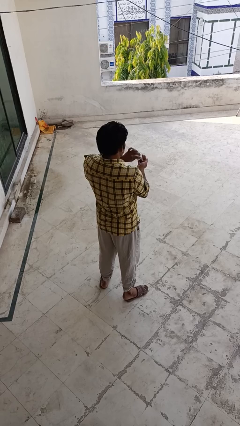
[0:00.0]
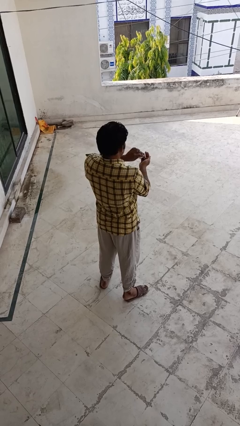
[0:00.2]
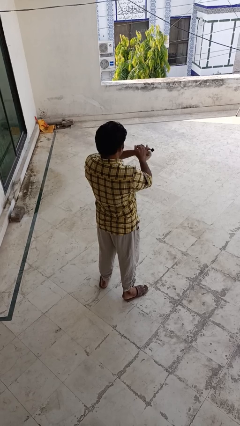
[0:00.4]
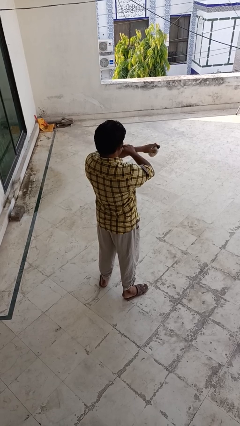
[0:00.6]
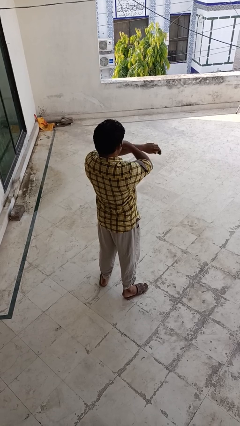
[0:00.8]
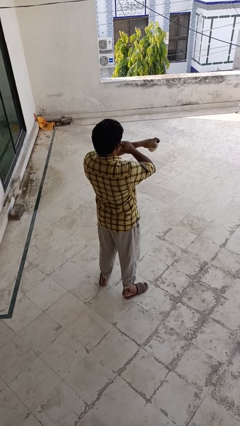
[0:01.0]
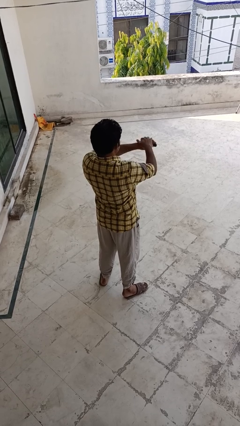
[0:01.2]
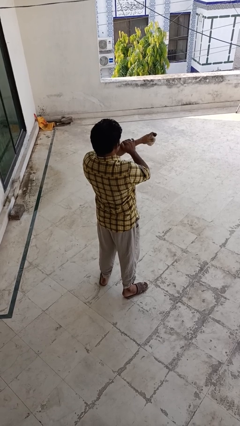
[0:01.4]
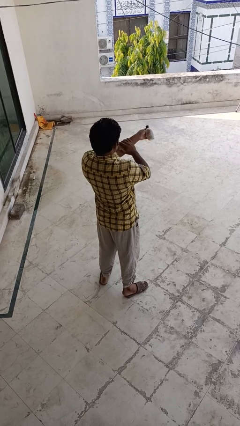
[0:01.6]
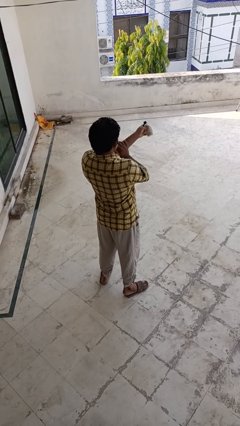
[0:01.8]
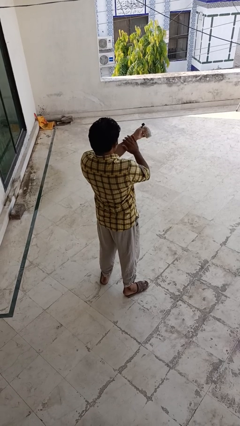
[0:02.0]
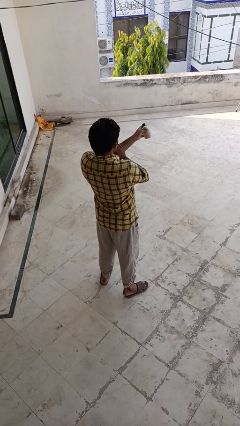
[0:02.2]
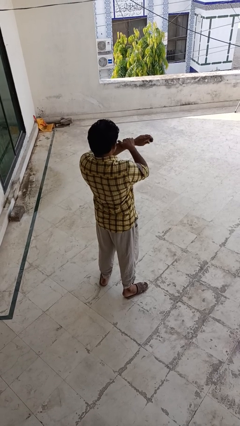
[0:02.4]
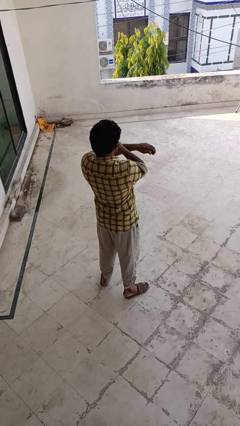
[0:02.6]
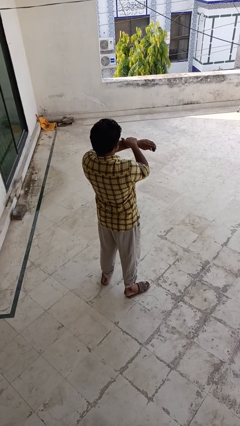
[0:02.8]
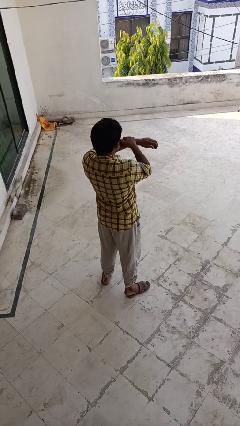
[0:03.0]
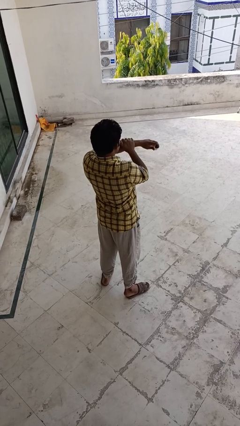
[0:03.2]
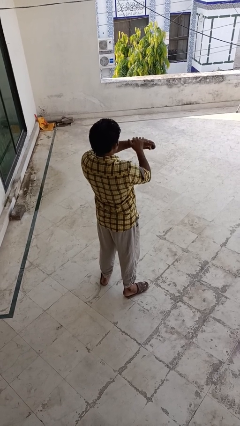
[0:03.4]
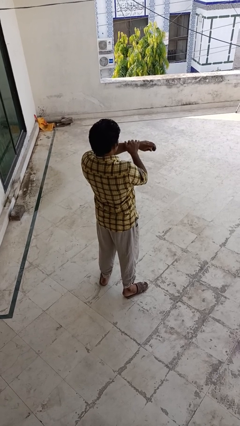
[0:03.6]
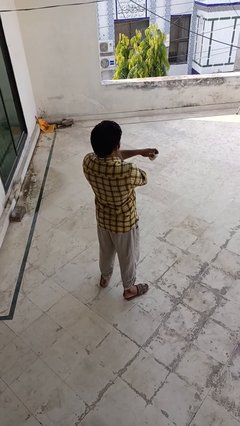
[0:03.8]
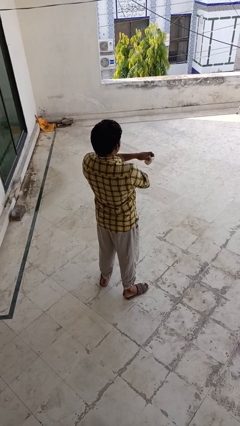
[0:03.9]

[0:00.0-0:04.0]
person applies sunscreen

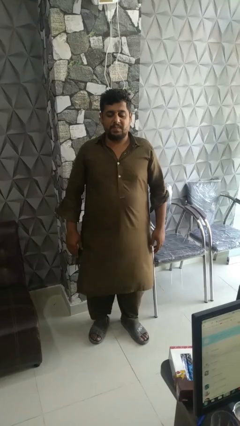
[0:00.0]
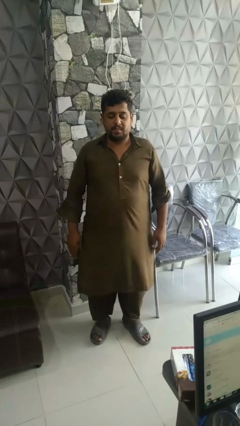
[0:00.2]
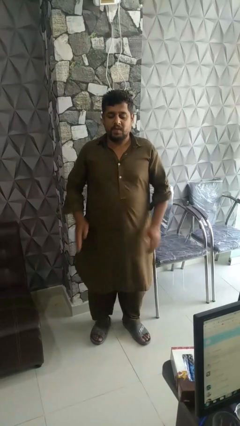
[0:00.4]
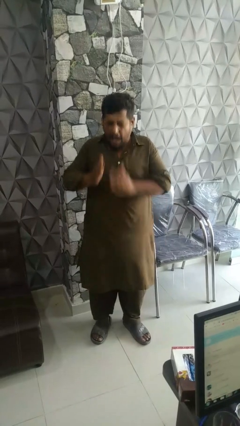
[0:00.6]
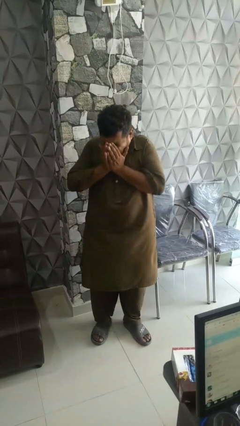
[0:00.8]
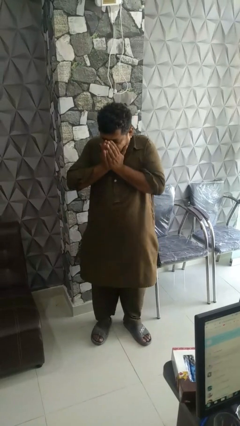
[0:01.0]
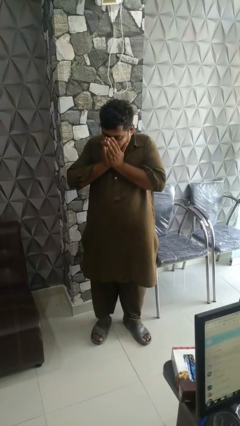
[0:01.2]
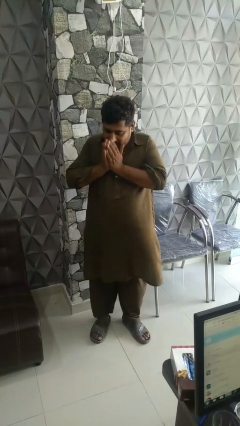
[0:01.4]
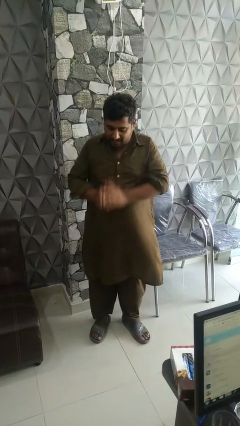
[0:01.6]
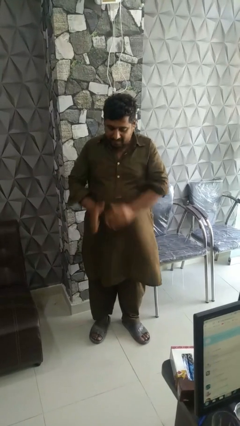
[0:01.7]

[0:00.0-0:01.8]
person sneezes into hand

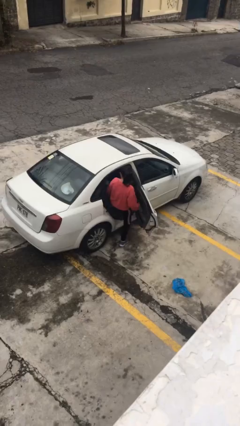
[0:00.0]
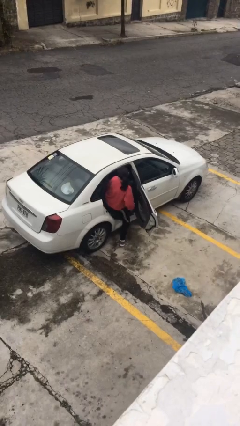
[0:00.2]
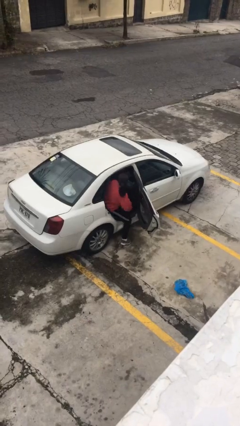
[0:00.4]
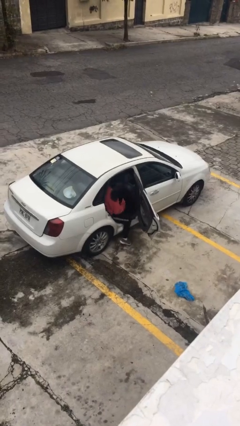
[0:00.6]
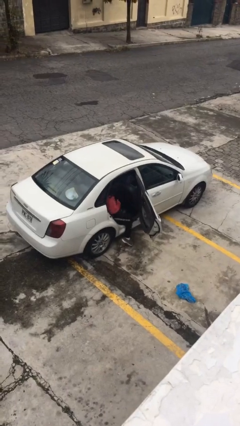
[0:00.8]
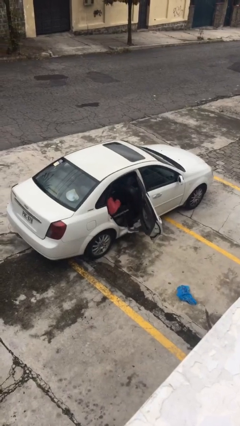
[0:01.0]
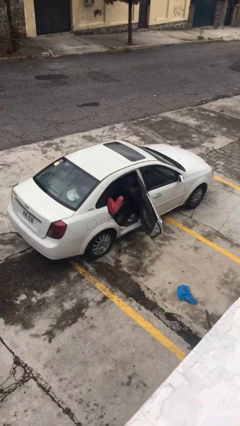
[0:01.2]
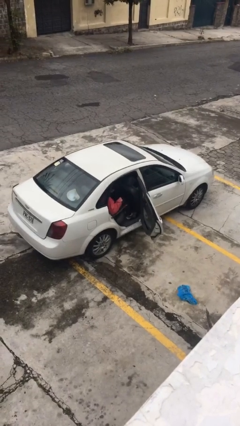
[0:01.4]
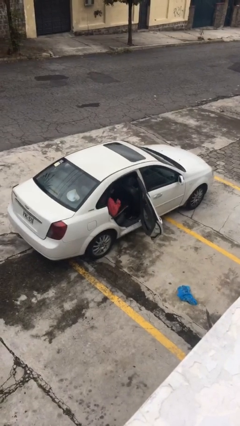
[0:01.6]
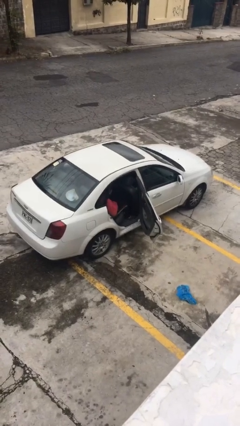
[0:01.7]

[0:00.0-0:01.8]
person enters car

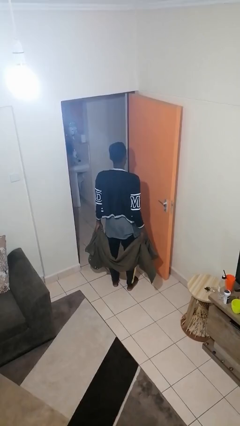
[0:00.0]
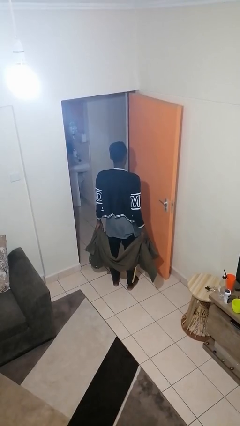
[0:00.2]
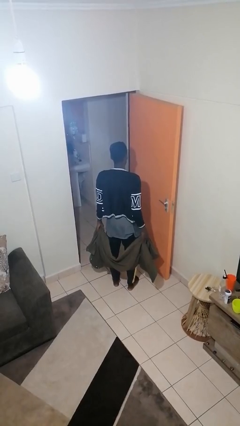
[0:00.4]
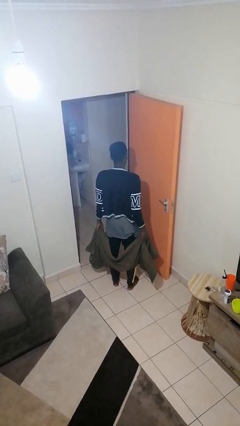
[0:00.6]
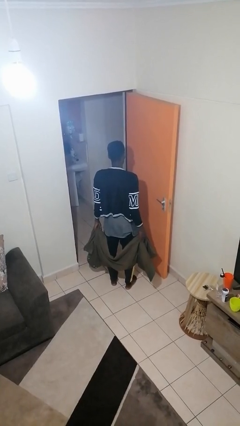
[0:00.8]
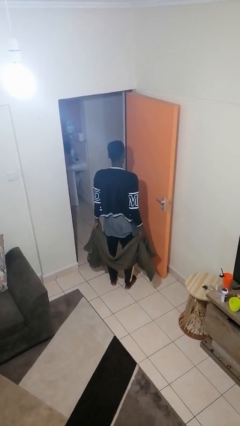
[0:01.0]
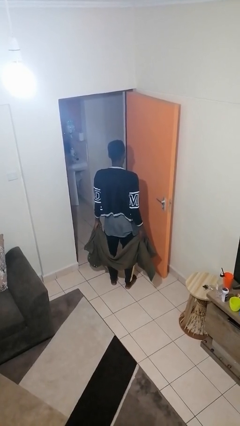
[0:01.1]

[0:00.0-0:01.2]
person ties jacket around waist

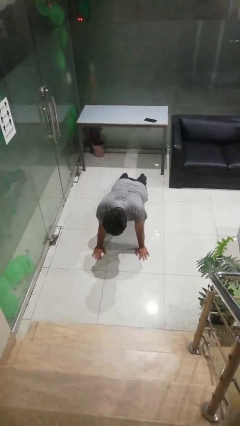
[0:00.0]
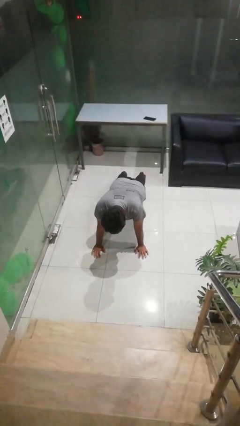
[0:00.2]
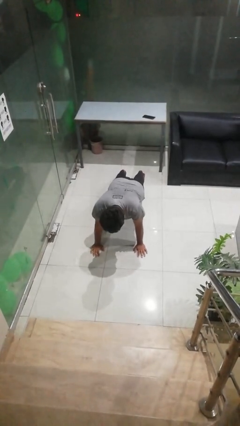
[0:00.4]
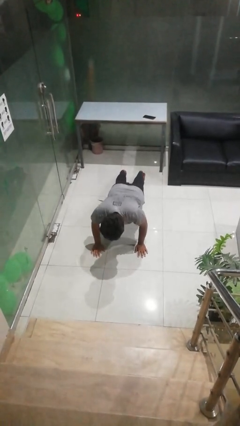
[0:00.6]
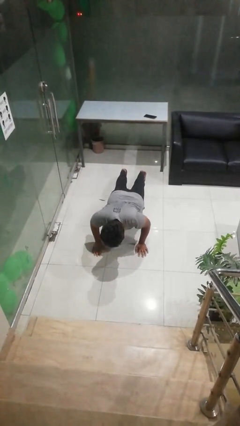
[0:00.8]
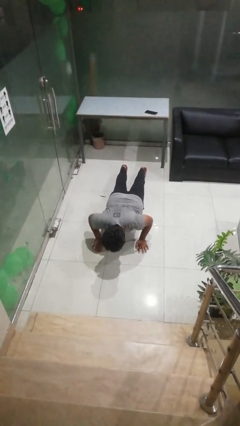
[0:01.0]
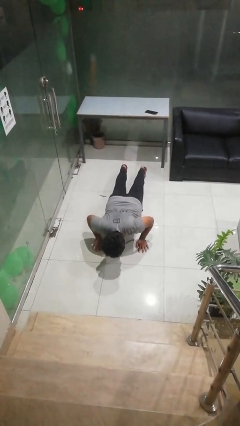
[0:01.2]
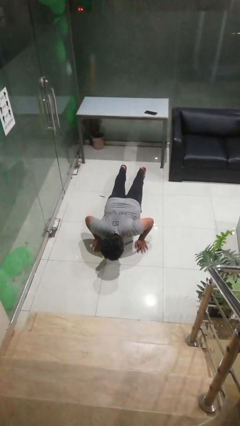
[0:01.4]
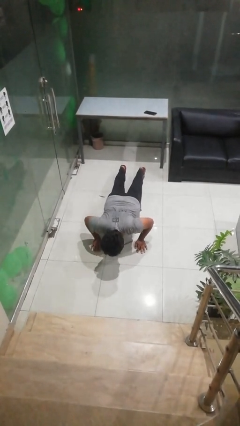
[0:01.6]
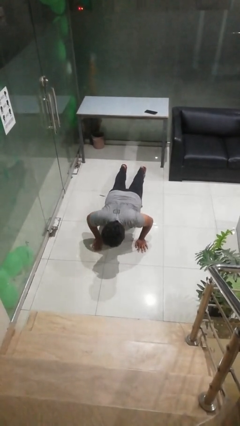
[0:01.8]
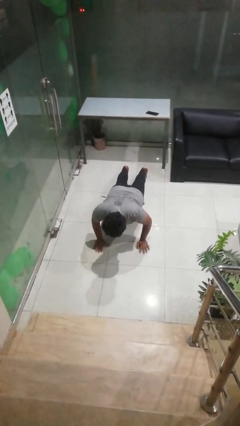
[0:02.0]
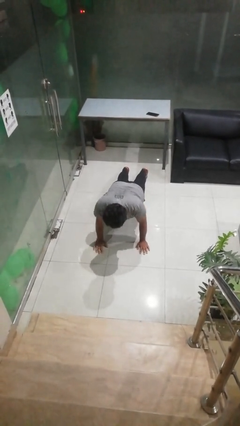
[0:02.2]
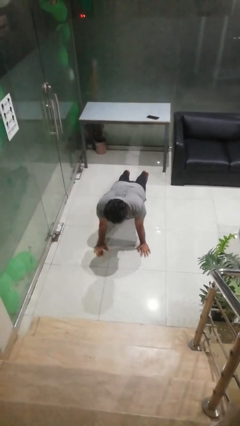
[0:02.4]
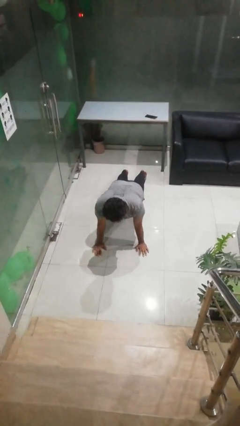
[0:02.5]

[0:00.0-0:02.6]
person exercises with pushup

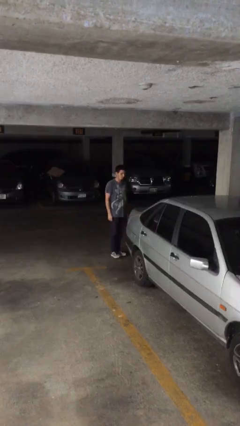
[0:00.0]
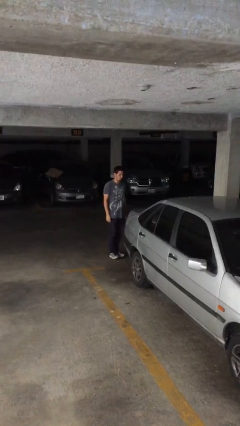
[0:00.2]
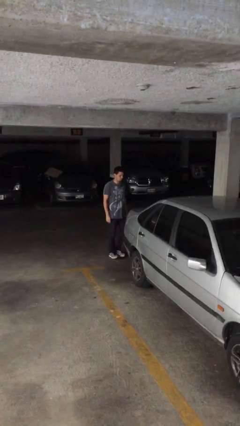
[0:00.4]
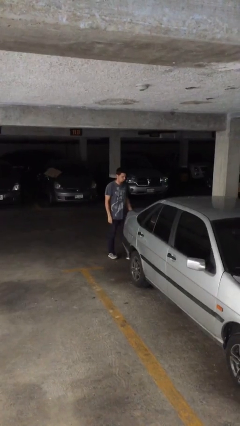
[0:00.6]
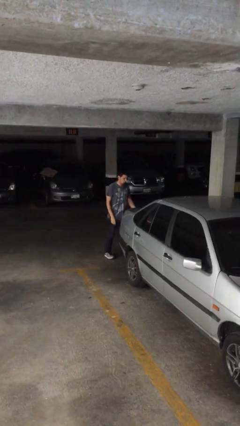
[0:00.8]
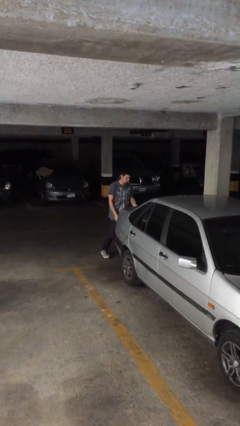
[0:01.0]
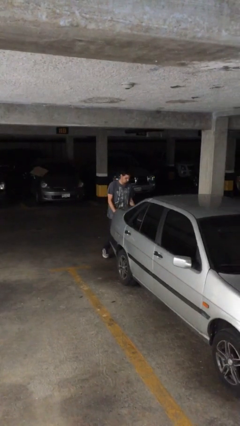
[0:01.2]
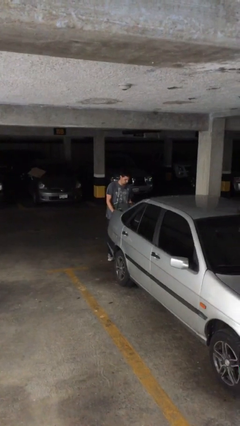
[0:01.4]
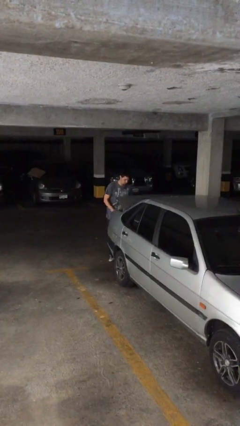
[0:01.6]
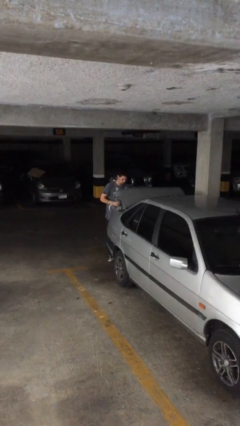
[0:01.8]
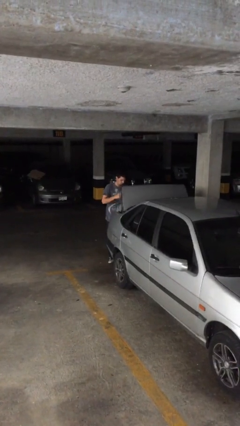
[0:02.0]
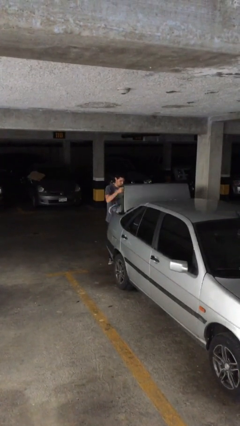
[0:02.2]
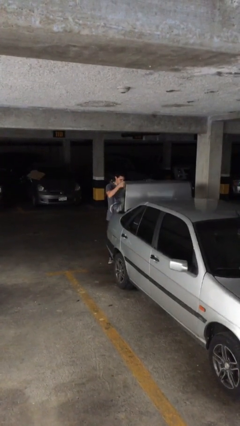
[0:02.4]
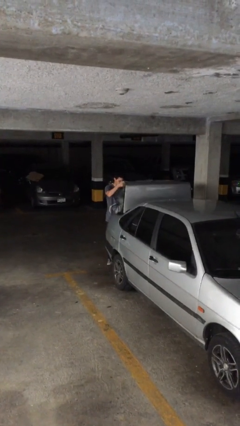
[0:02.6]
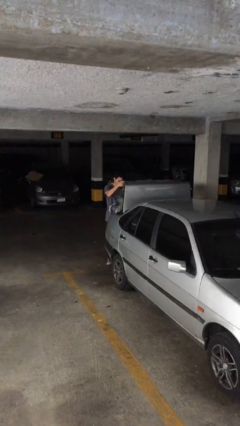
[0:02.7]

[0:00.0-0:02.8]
person opens car trunk

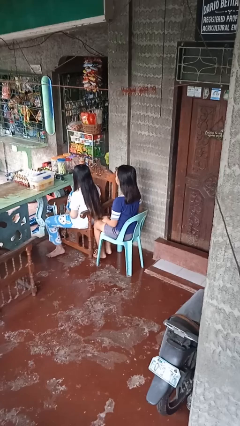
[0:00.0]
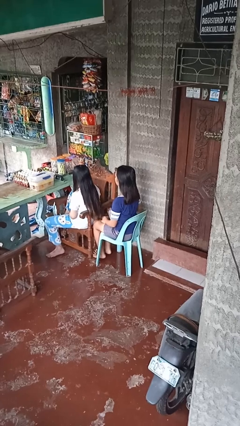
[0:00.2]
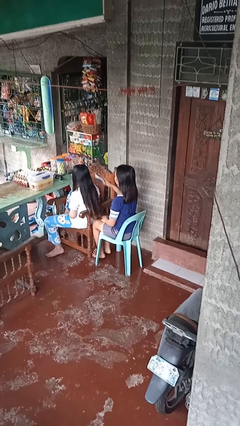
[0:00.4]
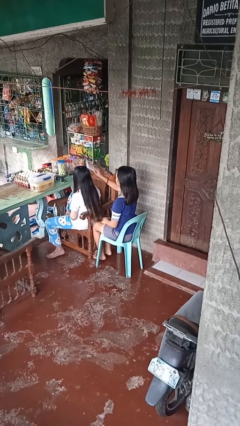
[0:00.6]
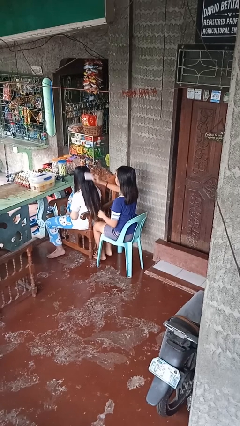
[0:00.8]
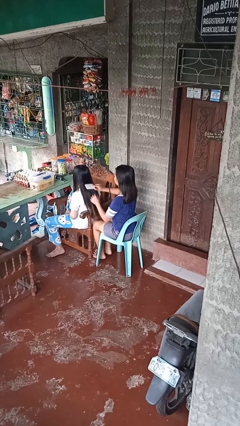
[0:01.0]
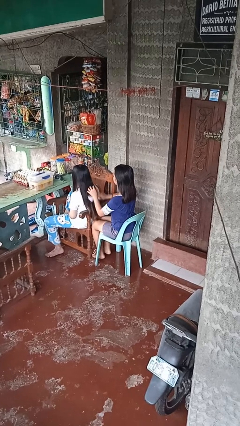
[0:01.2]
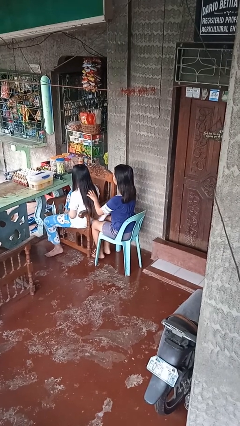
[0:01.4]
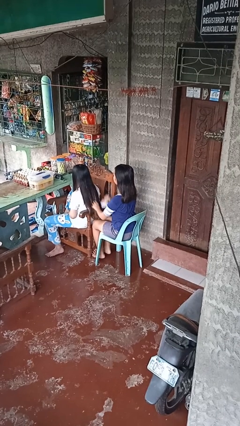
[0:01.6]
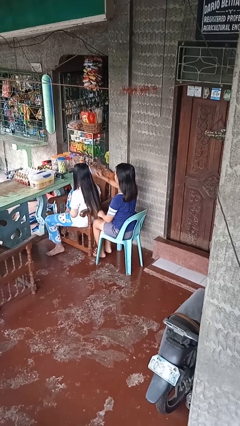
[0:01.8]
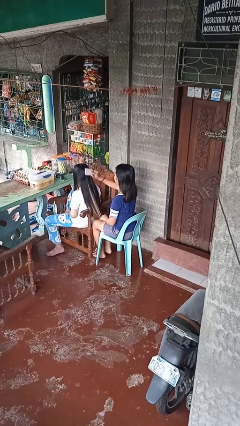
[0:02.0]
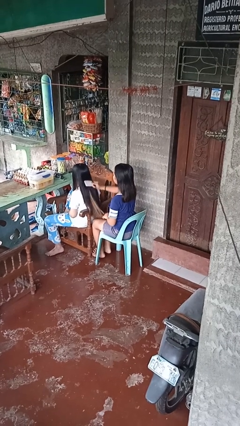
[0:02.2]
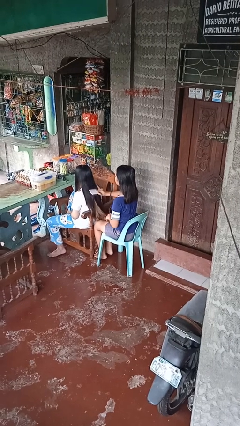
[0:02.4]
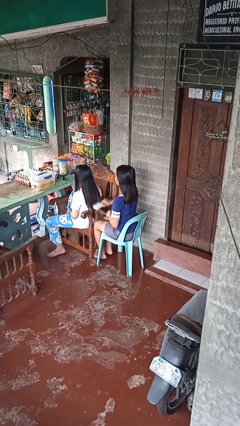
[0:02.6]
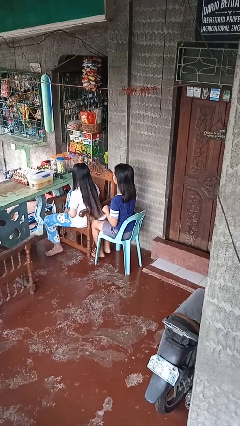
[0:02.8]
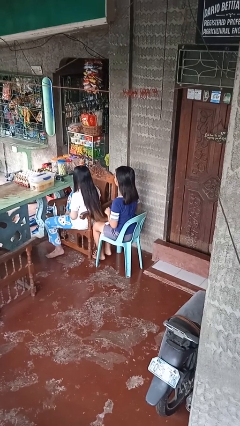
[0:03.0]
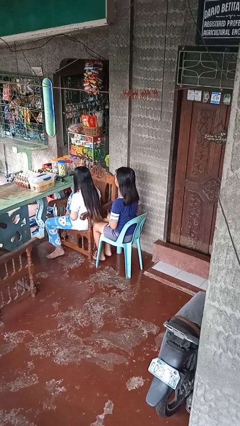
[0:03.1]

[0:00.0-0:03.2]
person brushes hair of person
